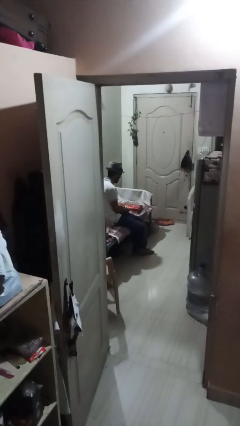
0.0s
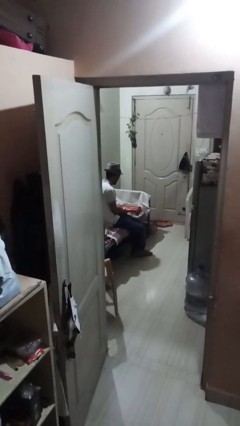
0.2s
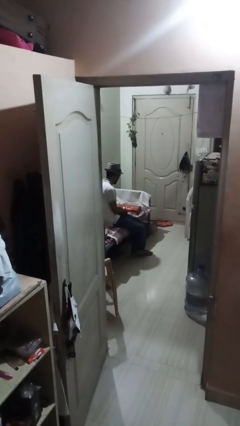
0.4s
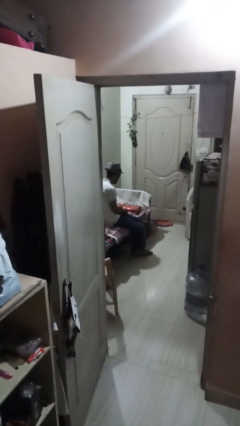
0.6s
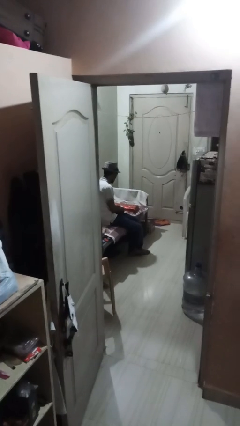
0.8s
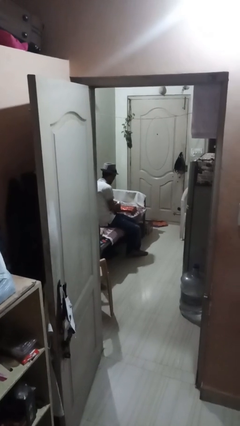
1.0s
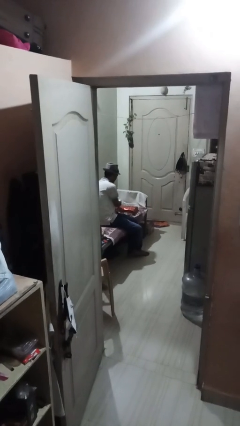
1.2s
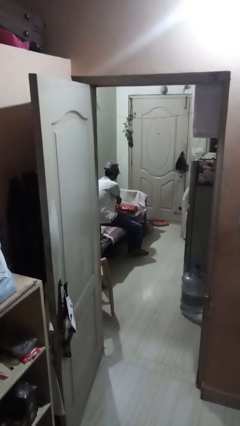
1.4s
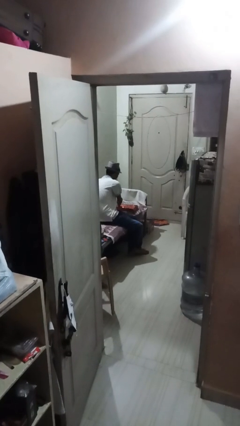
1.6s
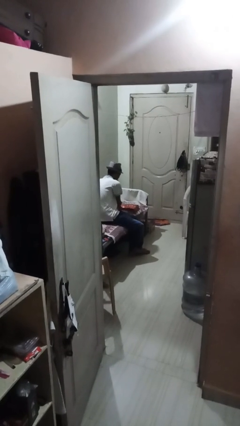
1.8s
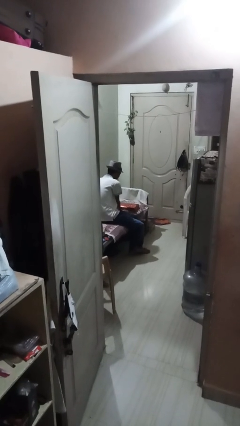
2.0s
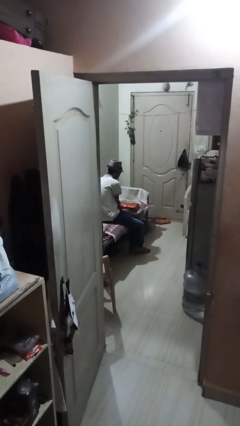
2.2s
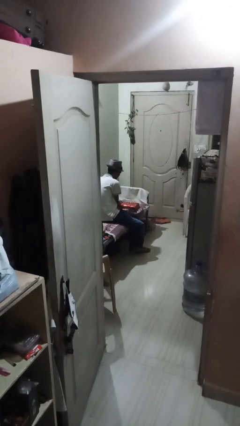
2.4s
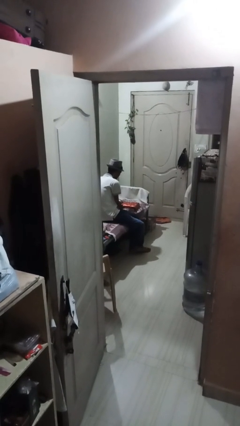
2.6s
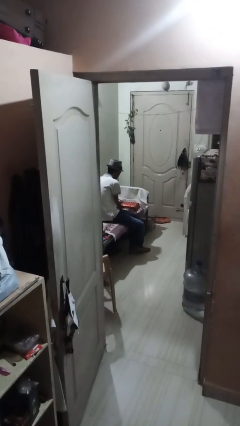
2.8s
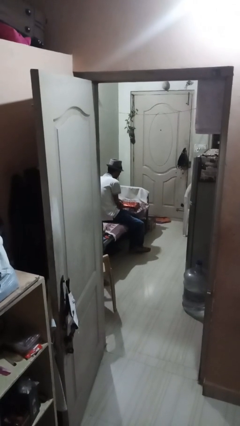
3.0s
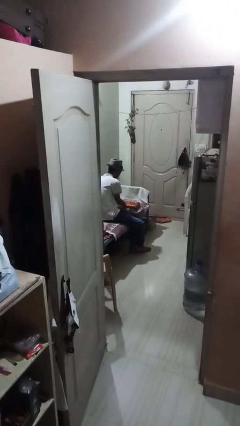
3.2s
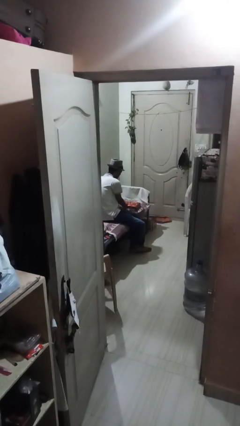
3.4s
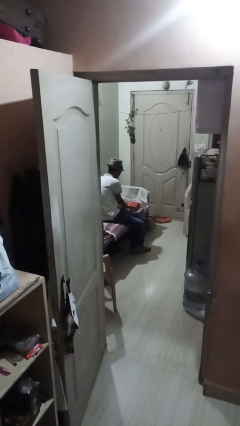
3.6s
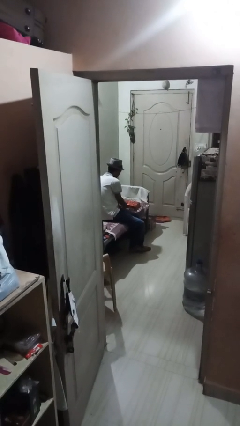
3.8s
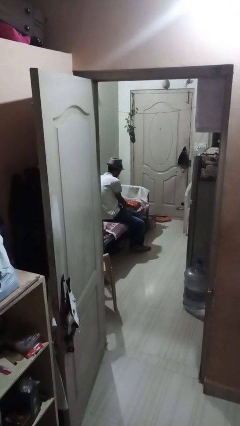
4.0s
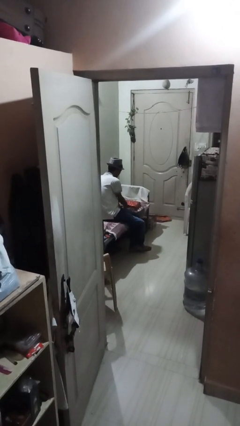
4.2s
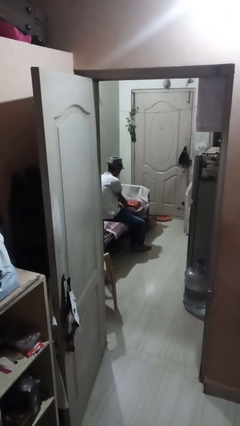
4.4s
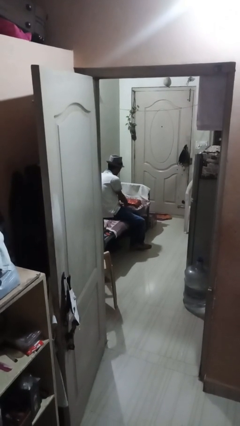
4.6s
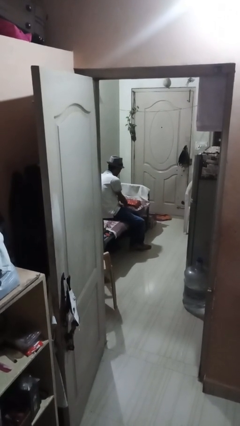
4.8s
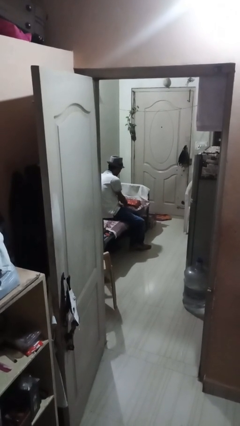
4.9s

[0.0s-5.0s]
person wraps box

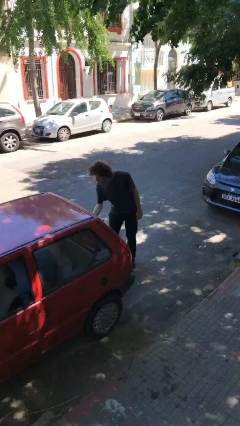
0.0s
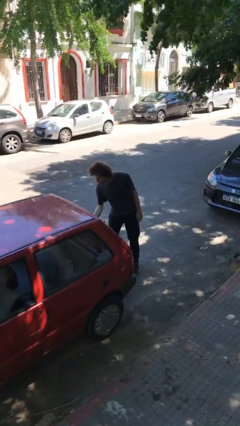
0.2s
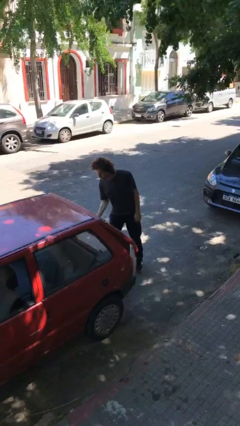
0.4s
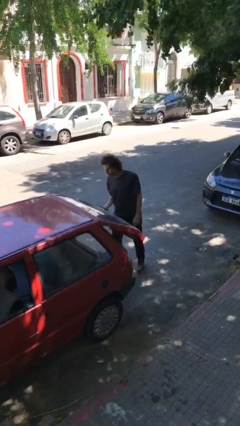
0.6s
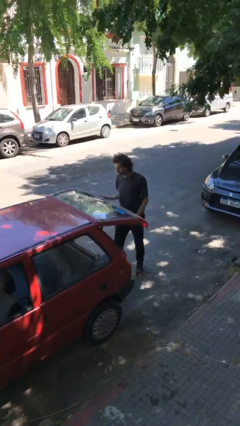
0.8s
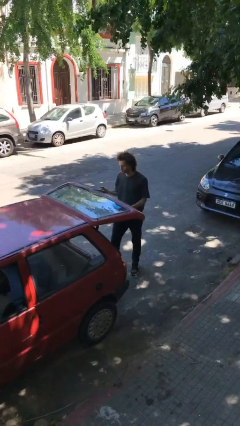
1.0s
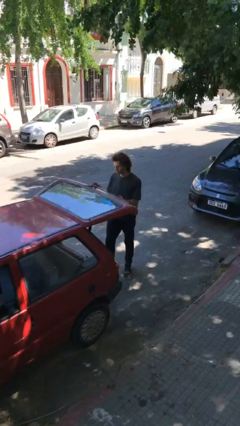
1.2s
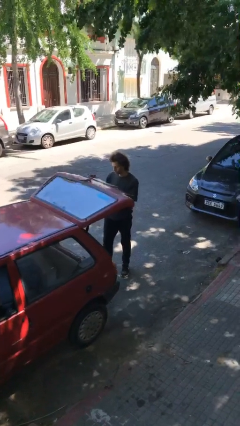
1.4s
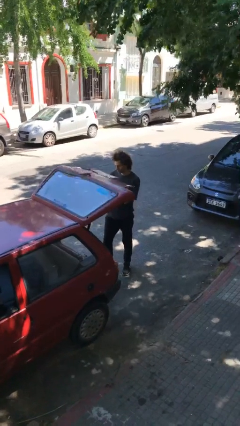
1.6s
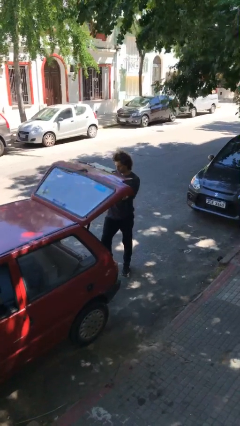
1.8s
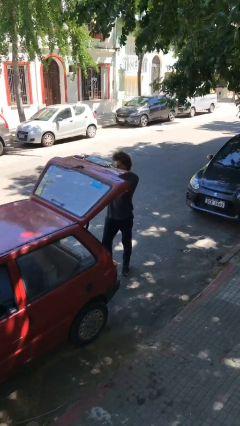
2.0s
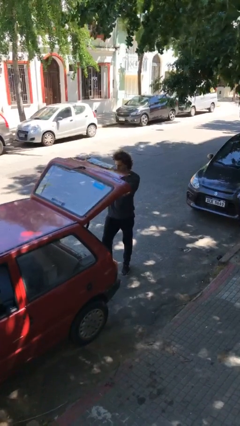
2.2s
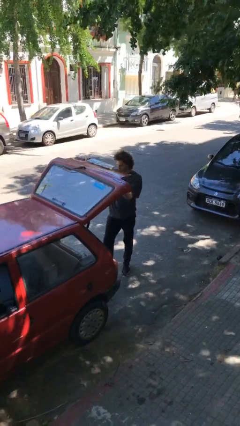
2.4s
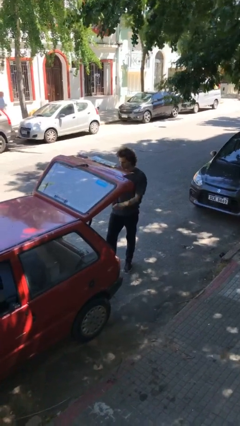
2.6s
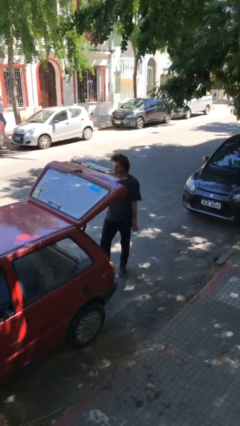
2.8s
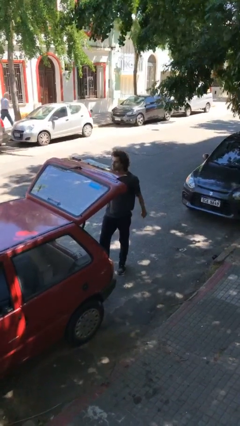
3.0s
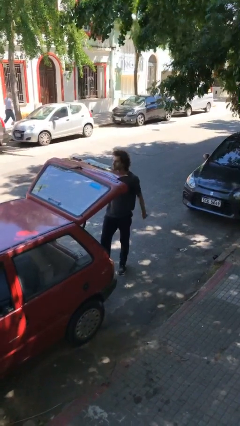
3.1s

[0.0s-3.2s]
person opens car trunk

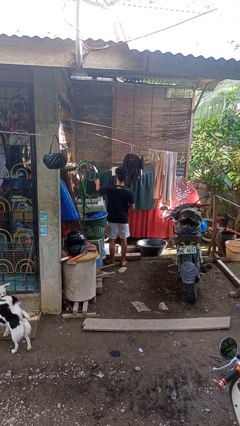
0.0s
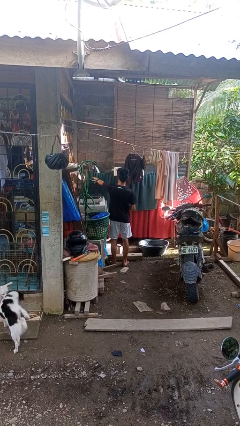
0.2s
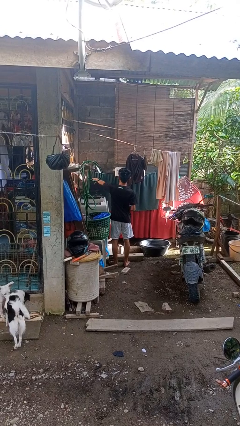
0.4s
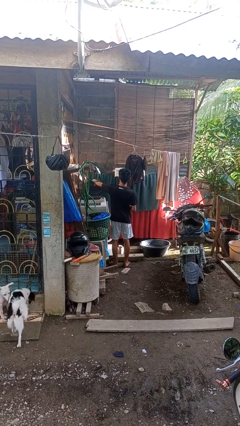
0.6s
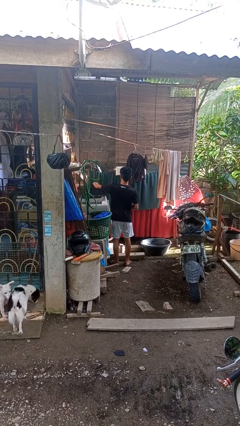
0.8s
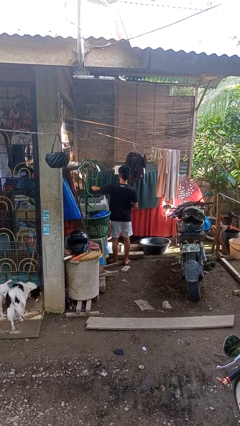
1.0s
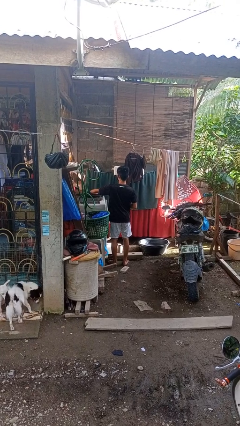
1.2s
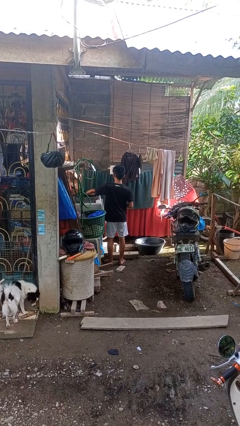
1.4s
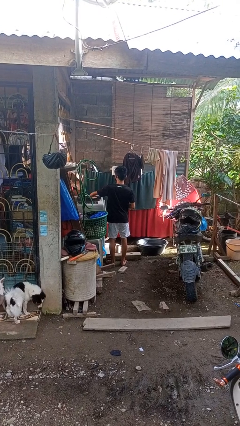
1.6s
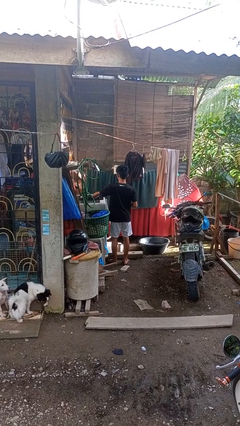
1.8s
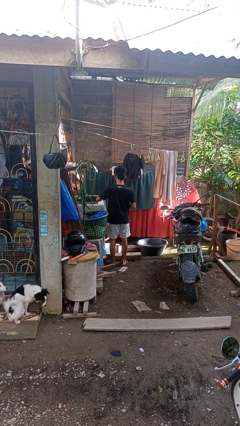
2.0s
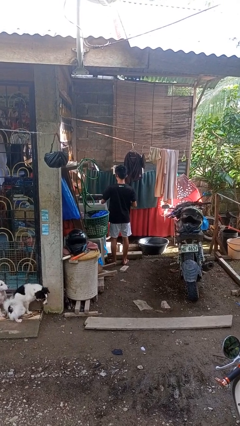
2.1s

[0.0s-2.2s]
person closes clothes washer

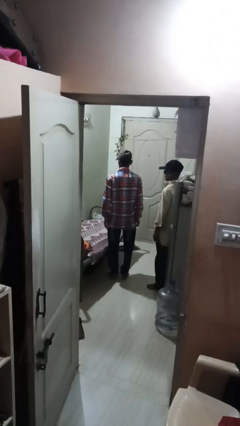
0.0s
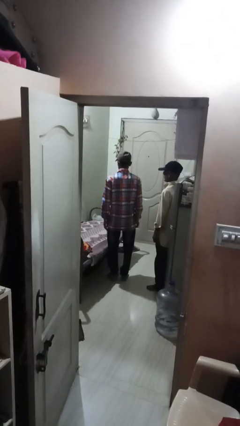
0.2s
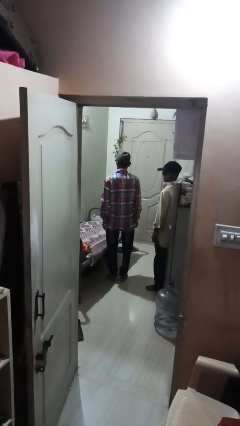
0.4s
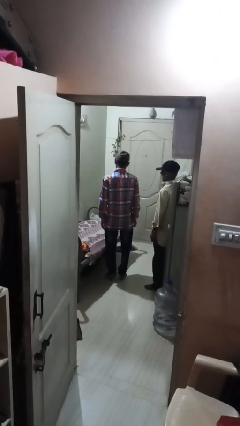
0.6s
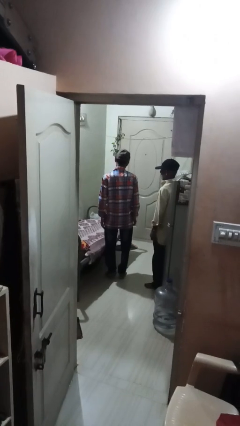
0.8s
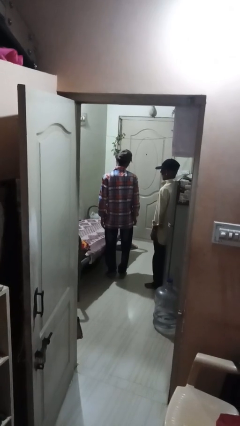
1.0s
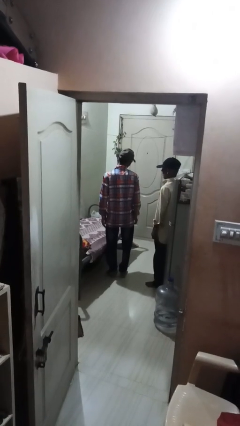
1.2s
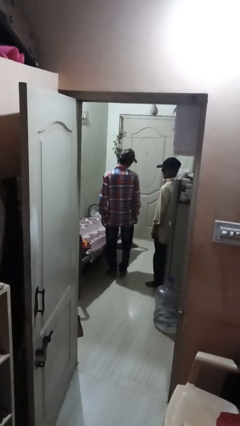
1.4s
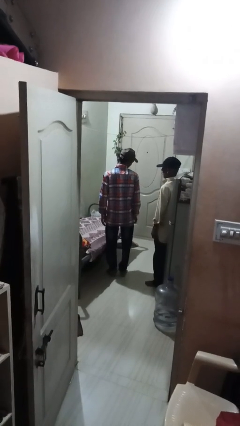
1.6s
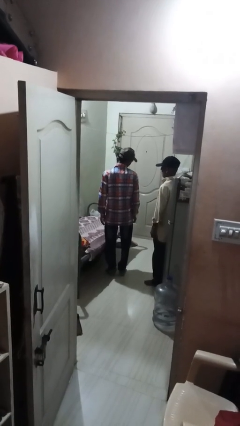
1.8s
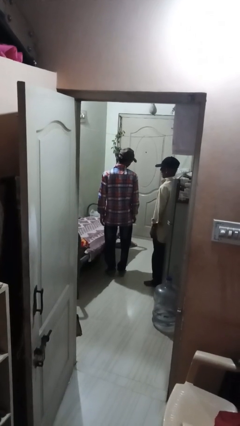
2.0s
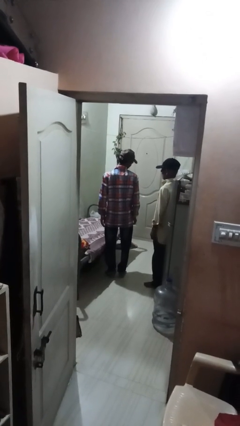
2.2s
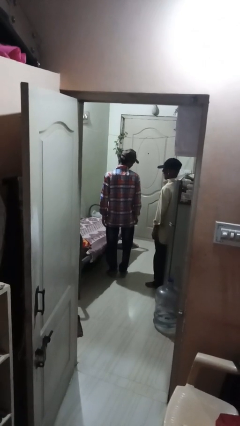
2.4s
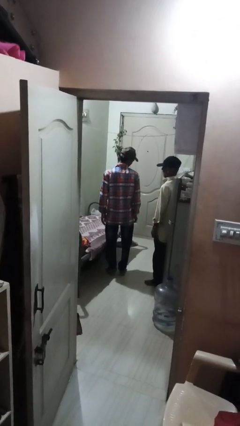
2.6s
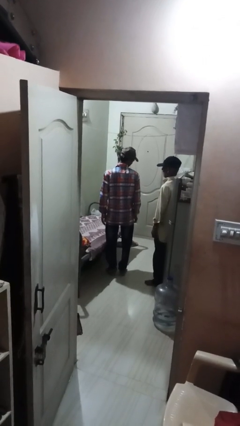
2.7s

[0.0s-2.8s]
person looks over shoulder

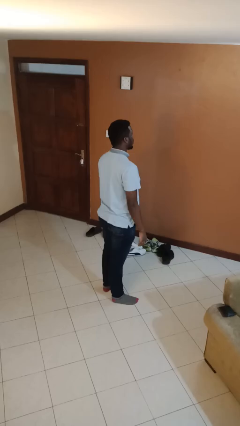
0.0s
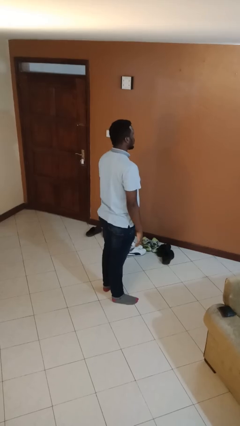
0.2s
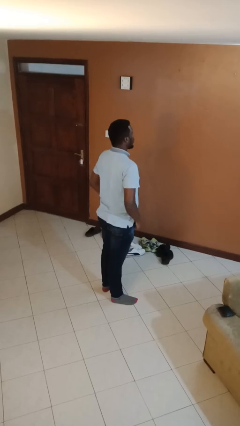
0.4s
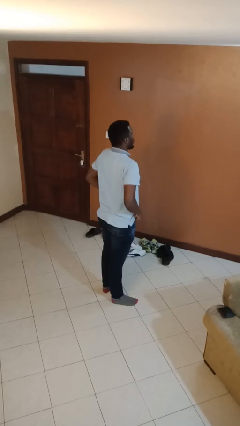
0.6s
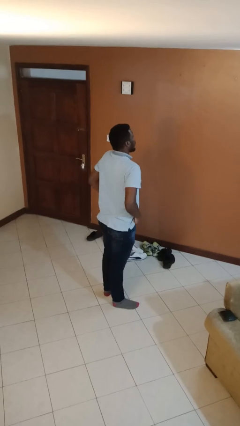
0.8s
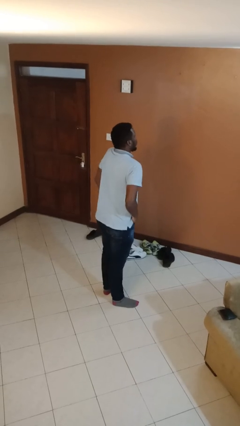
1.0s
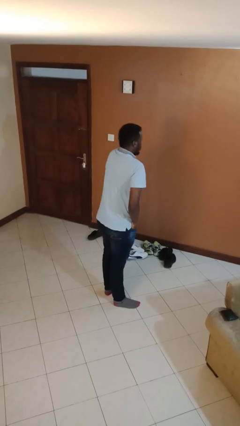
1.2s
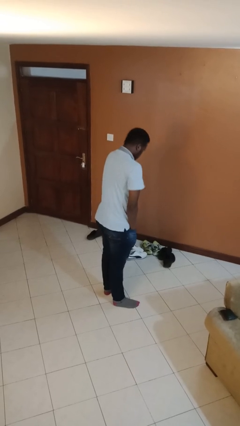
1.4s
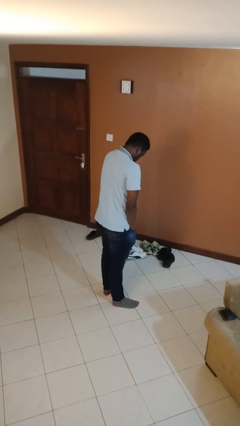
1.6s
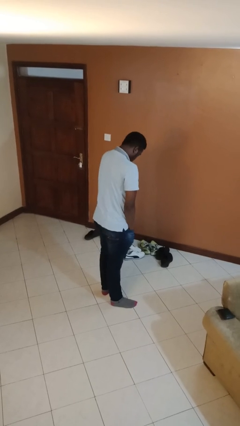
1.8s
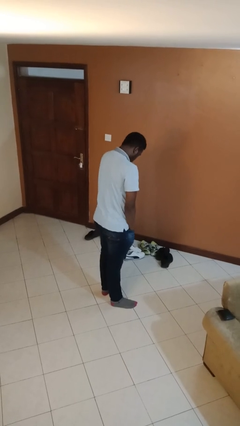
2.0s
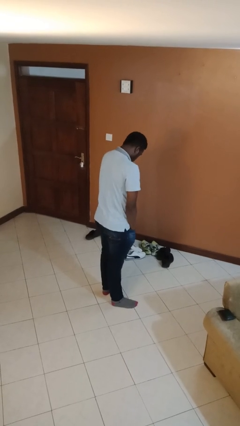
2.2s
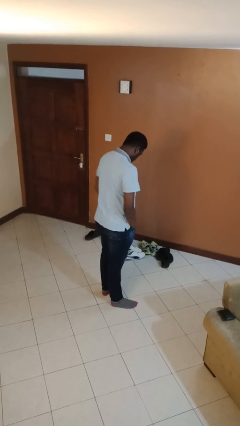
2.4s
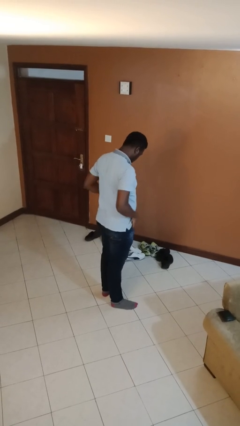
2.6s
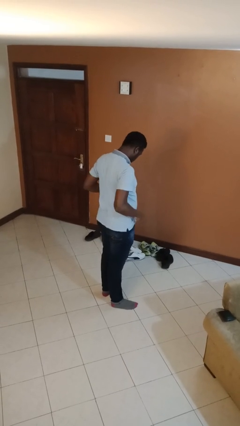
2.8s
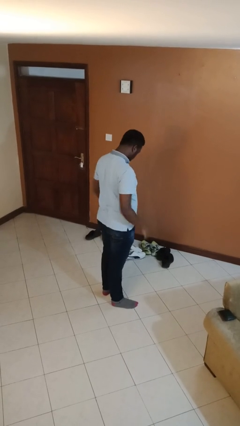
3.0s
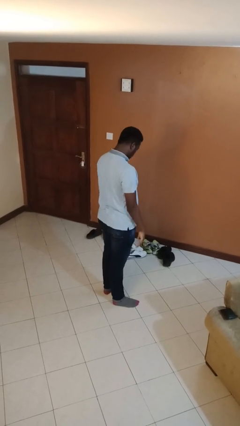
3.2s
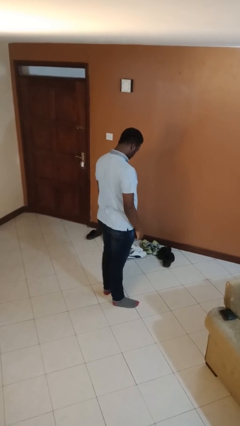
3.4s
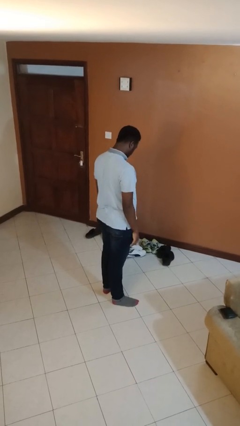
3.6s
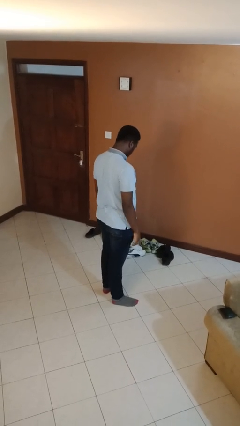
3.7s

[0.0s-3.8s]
person puts hands in back pockets
